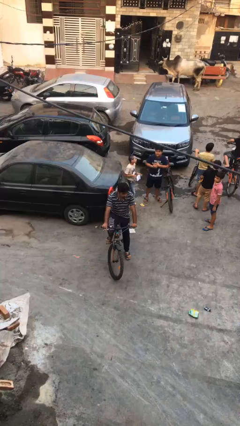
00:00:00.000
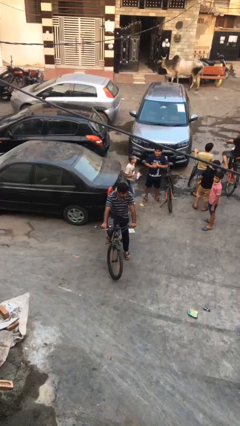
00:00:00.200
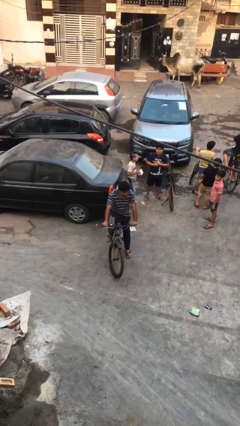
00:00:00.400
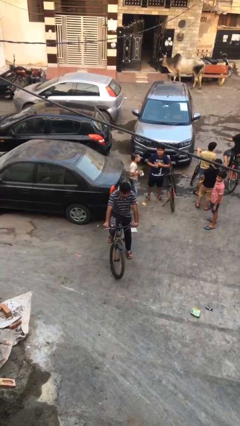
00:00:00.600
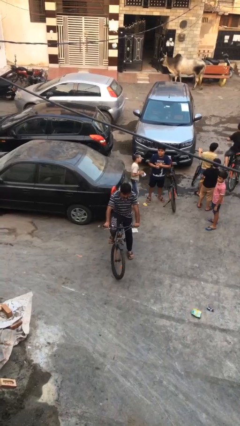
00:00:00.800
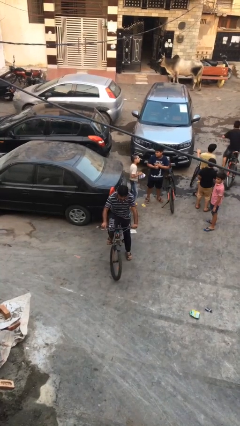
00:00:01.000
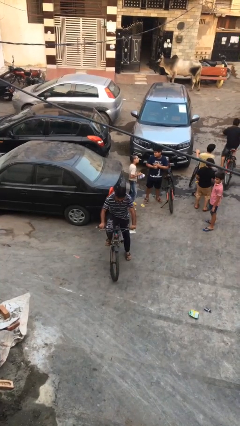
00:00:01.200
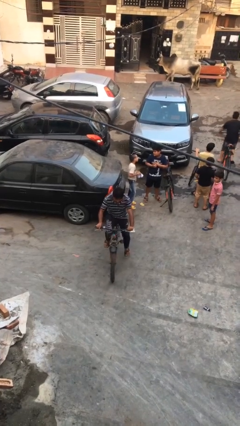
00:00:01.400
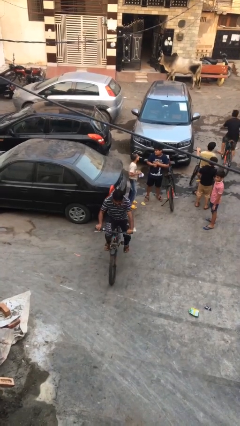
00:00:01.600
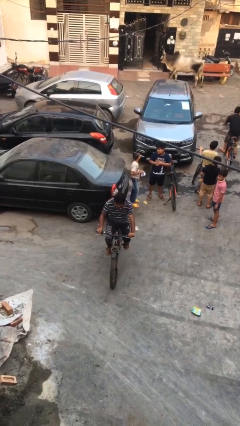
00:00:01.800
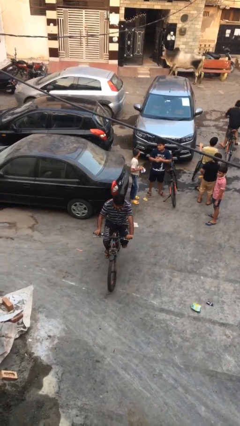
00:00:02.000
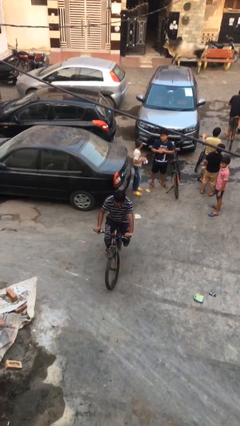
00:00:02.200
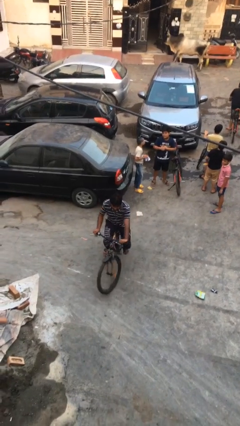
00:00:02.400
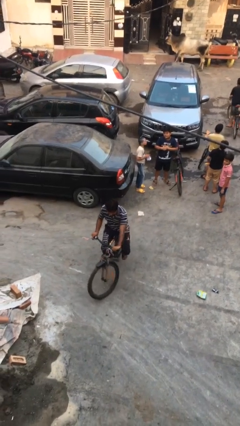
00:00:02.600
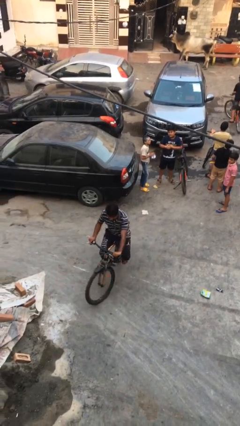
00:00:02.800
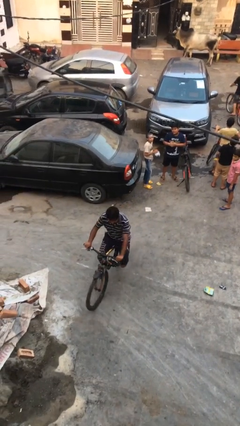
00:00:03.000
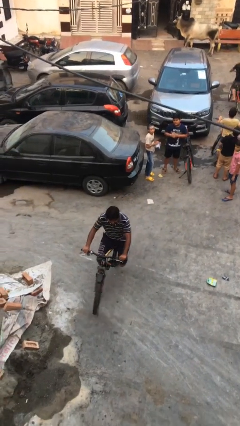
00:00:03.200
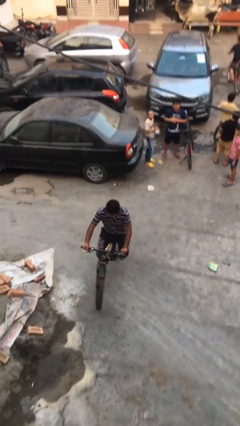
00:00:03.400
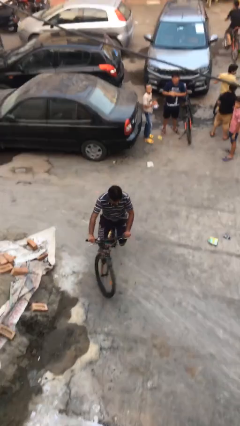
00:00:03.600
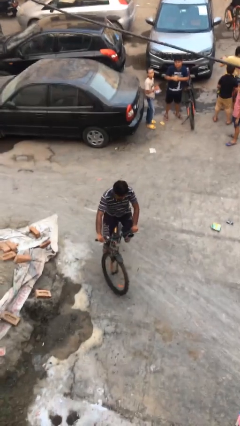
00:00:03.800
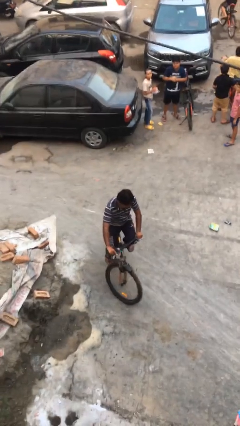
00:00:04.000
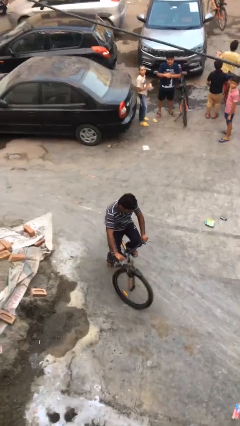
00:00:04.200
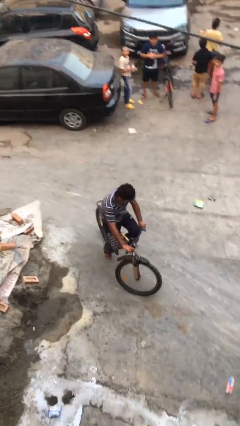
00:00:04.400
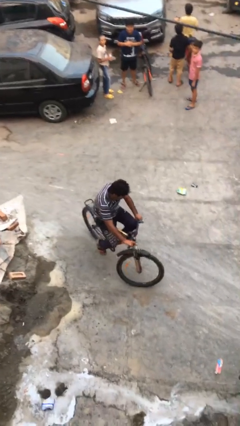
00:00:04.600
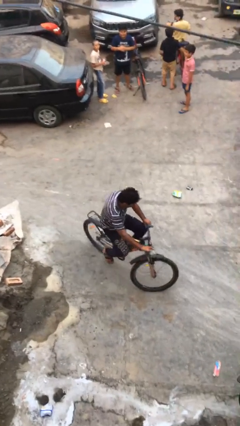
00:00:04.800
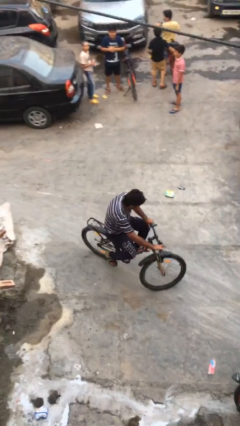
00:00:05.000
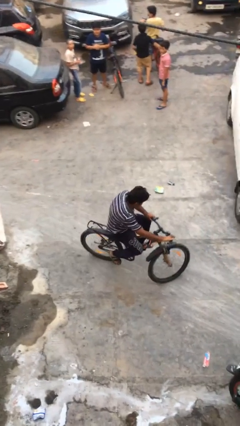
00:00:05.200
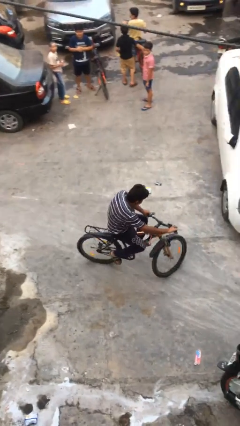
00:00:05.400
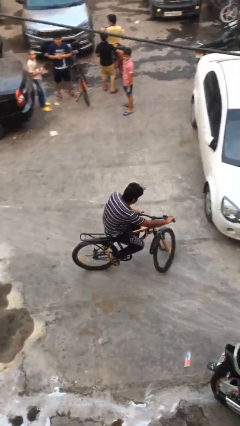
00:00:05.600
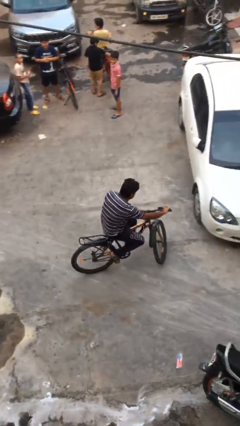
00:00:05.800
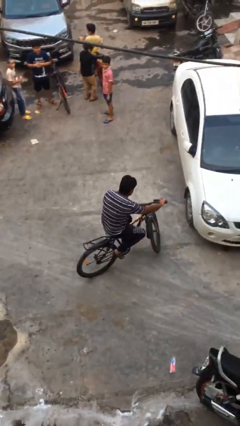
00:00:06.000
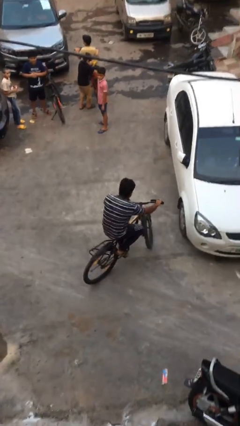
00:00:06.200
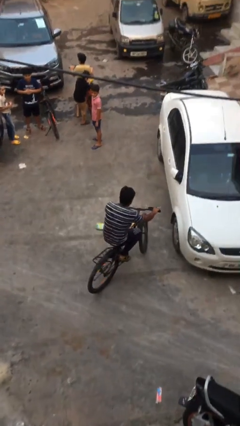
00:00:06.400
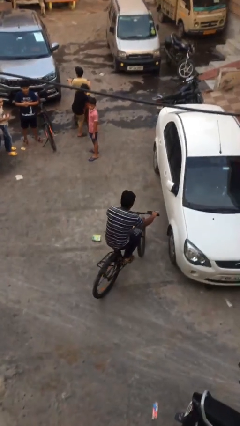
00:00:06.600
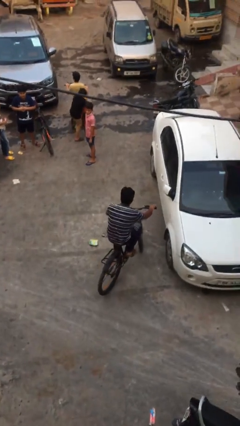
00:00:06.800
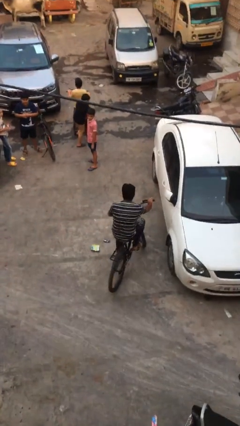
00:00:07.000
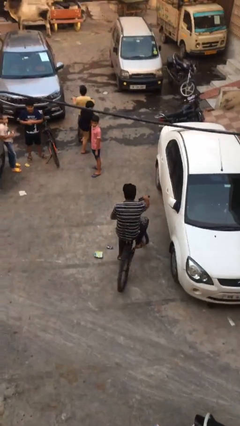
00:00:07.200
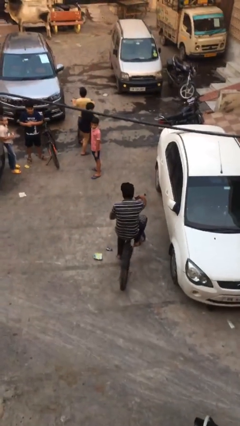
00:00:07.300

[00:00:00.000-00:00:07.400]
person rides bicycle

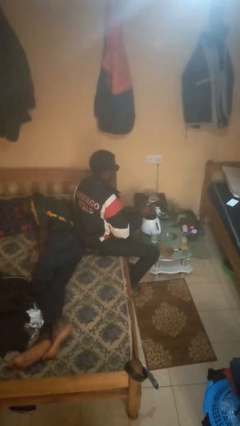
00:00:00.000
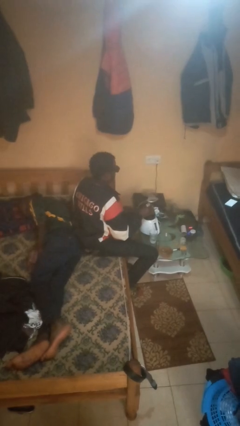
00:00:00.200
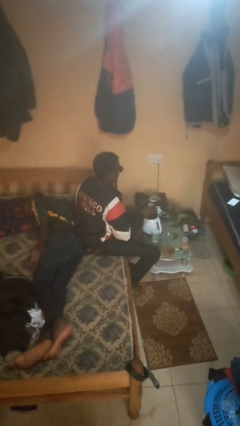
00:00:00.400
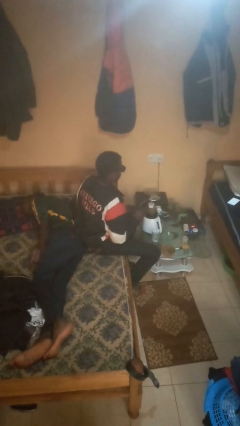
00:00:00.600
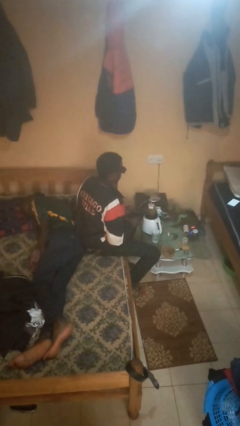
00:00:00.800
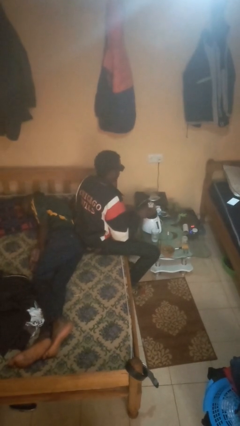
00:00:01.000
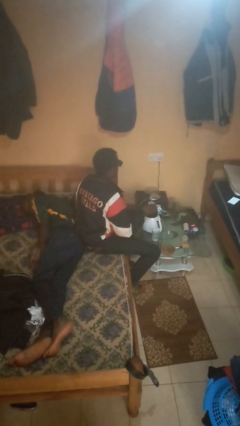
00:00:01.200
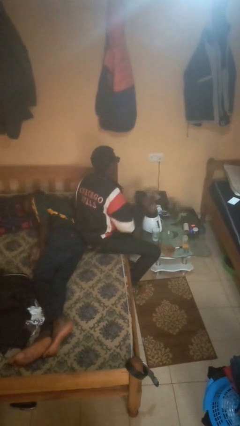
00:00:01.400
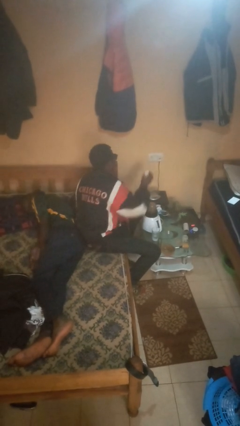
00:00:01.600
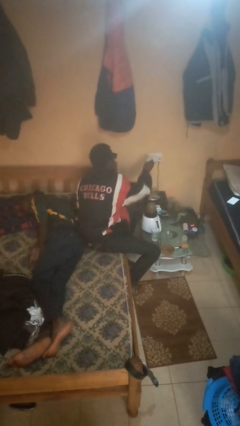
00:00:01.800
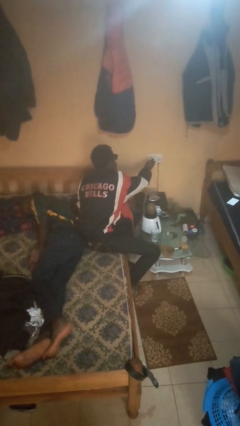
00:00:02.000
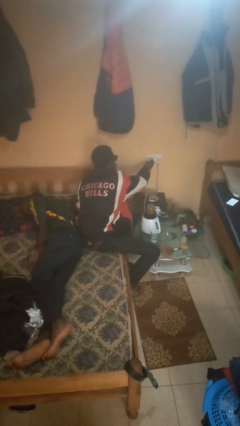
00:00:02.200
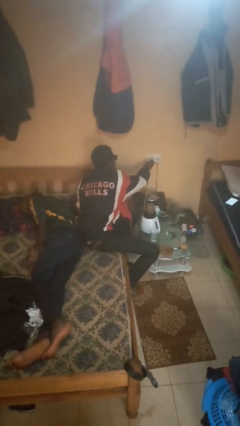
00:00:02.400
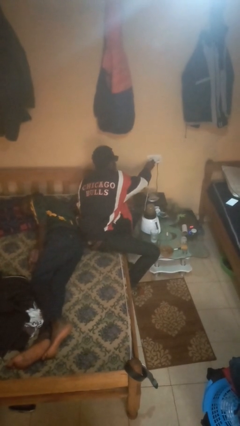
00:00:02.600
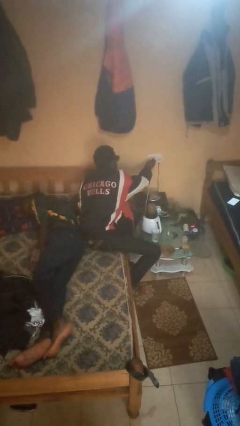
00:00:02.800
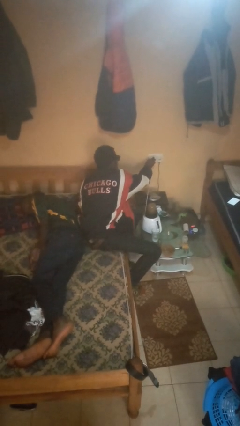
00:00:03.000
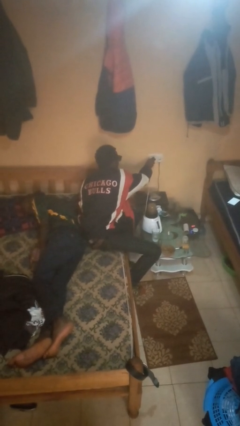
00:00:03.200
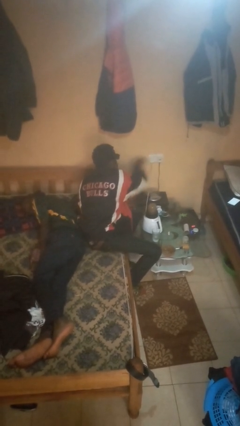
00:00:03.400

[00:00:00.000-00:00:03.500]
person plugs into electrical socket

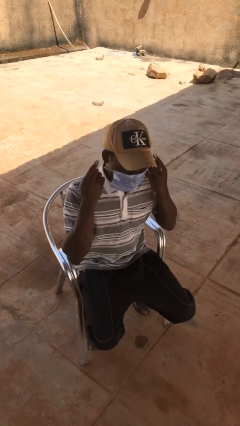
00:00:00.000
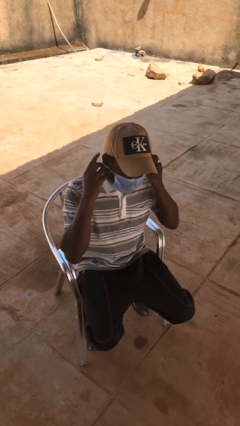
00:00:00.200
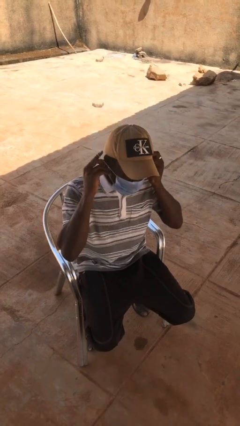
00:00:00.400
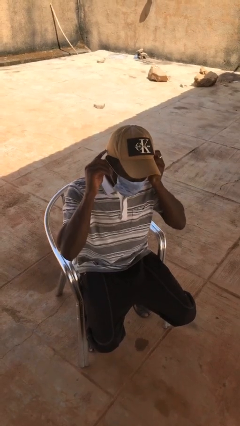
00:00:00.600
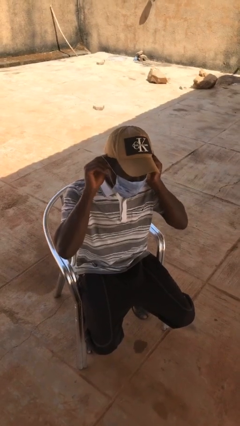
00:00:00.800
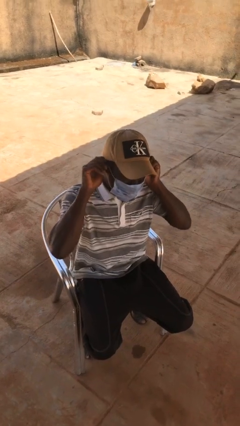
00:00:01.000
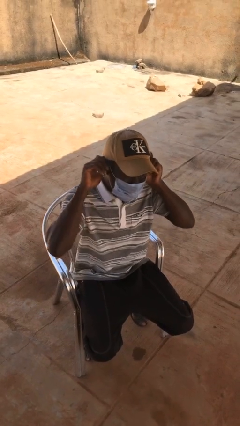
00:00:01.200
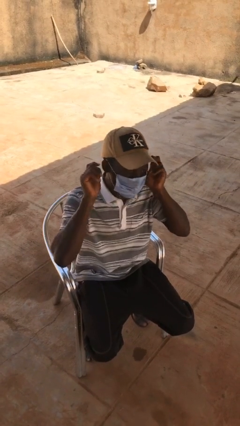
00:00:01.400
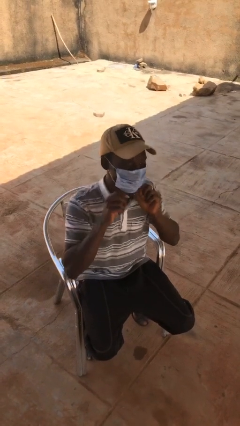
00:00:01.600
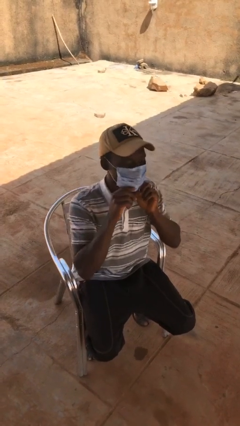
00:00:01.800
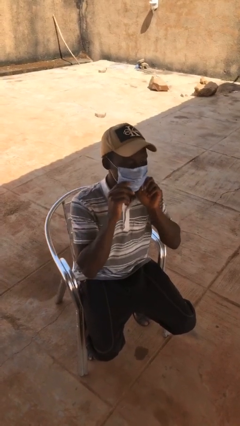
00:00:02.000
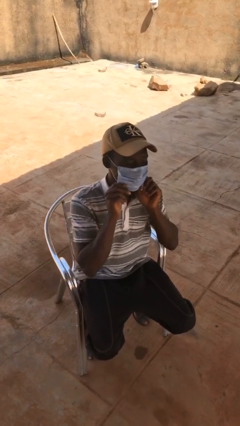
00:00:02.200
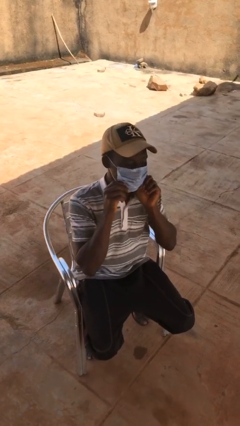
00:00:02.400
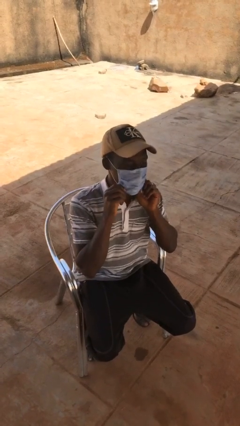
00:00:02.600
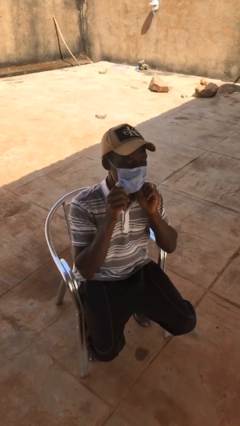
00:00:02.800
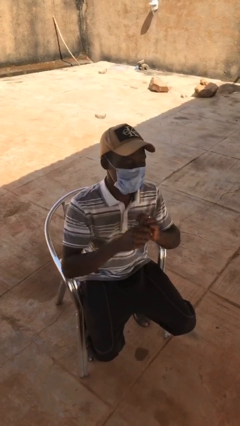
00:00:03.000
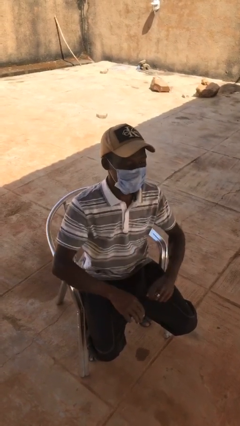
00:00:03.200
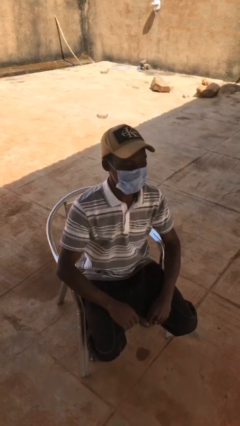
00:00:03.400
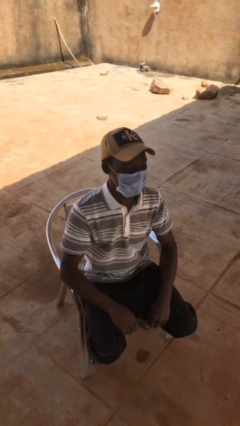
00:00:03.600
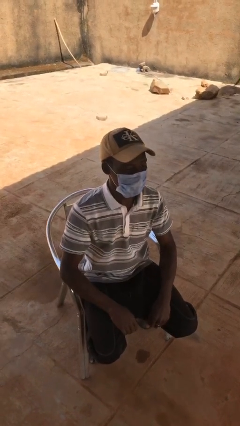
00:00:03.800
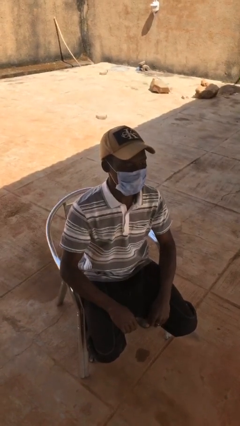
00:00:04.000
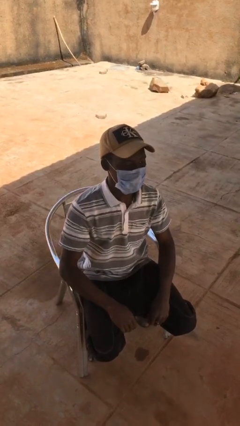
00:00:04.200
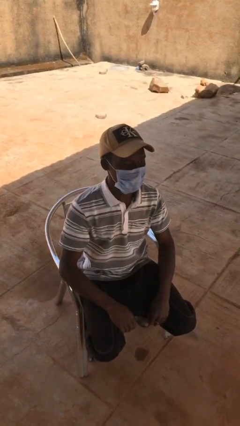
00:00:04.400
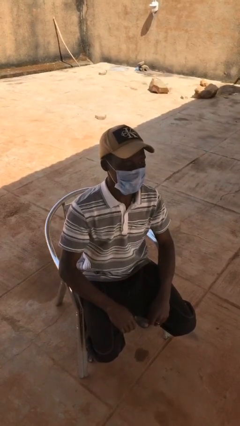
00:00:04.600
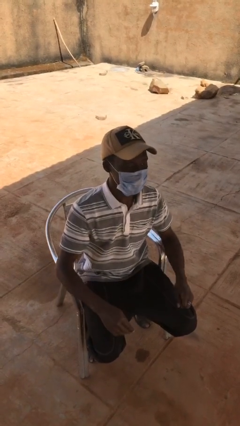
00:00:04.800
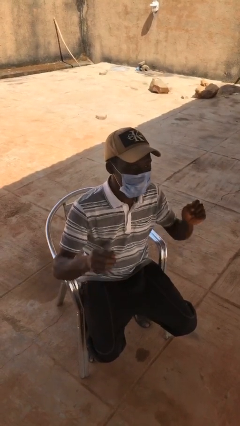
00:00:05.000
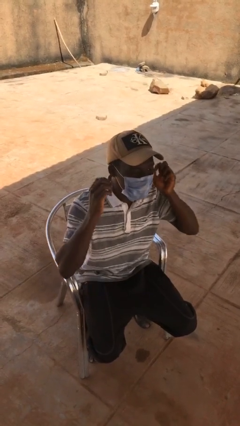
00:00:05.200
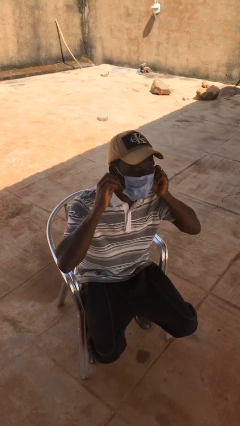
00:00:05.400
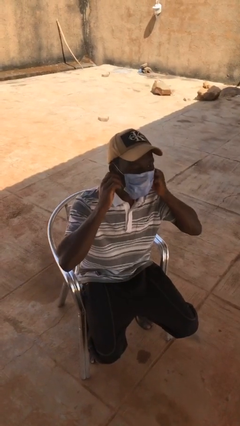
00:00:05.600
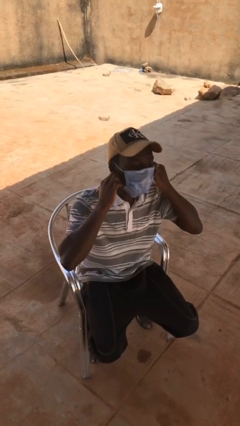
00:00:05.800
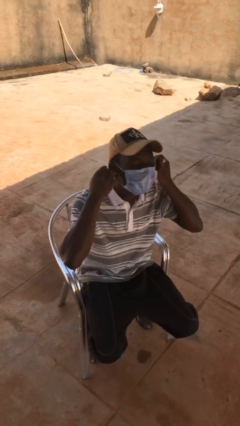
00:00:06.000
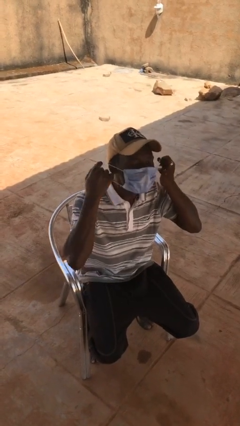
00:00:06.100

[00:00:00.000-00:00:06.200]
person puts on facemask

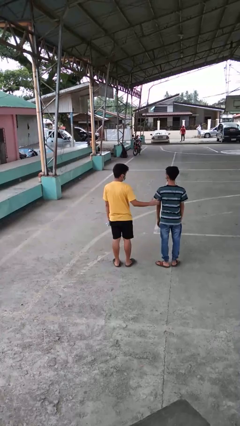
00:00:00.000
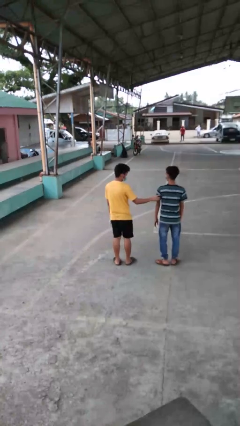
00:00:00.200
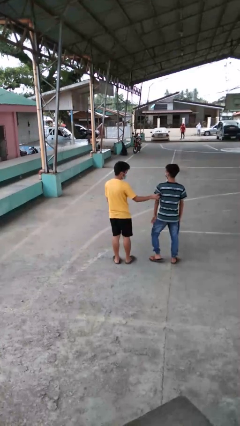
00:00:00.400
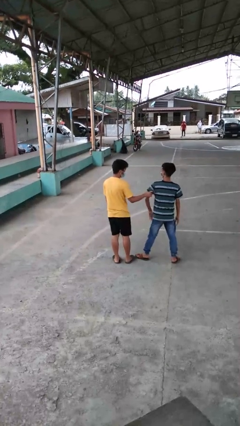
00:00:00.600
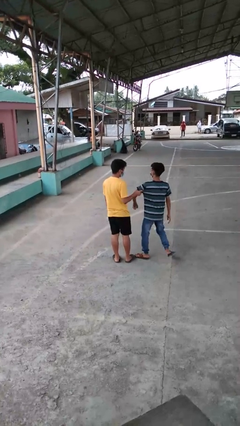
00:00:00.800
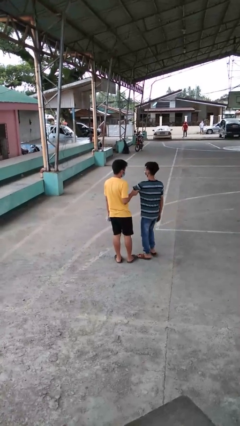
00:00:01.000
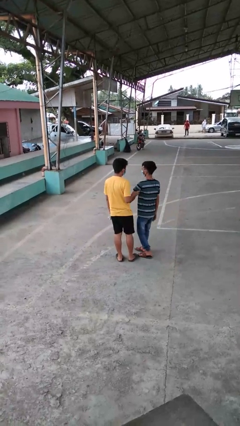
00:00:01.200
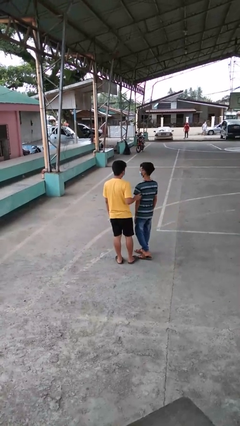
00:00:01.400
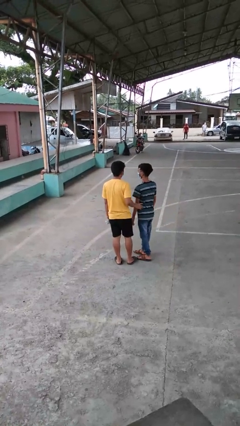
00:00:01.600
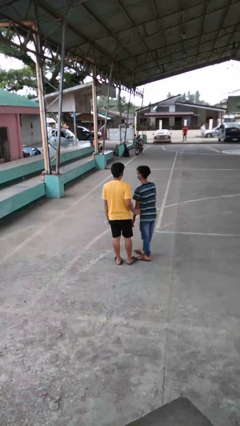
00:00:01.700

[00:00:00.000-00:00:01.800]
person grabs person by bicep
